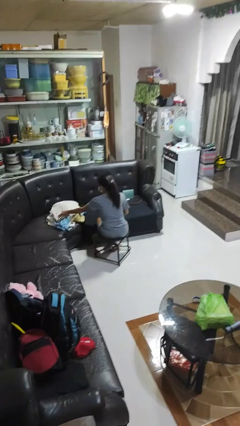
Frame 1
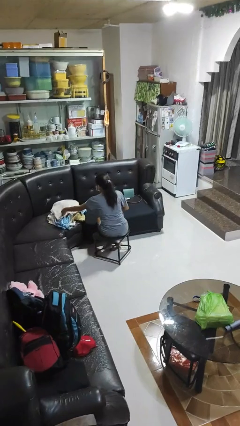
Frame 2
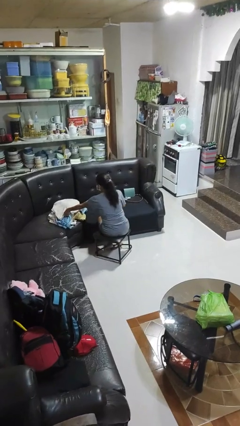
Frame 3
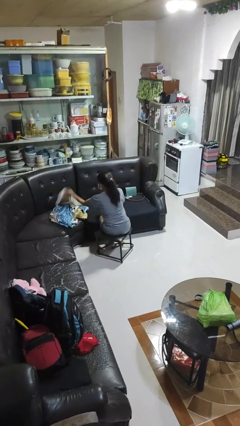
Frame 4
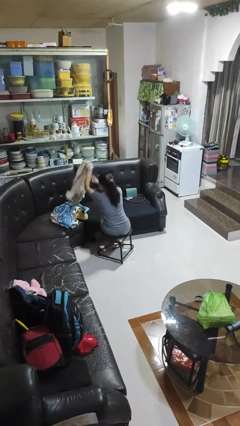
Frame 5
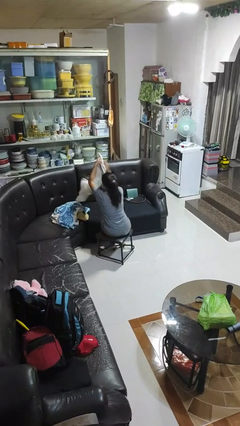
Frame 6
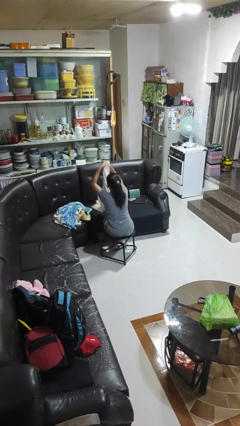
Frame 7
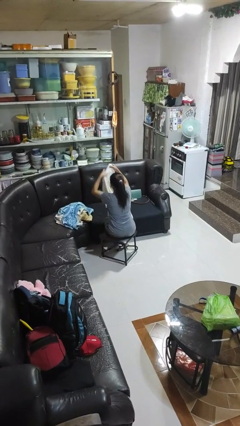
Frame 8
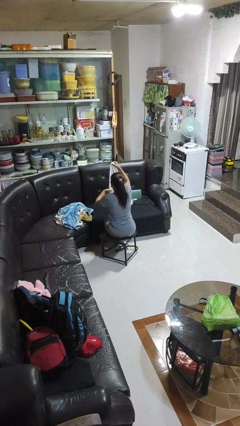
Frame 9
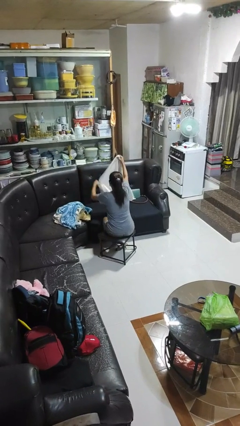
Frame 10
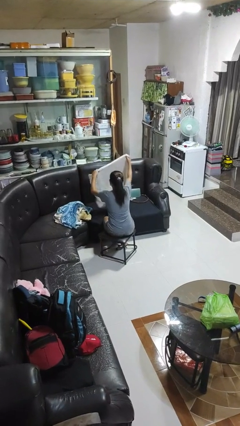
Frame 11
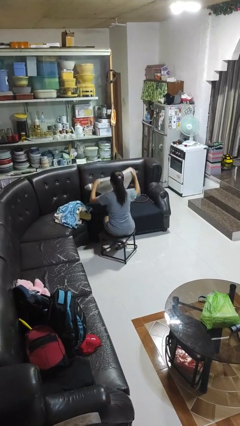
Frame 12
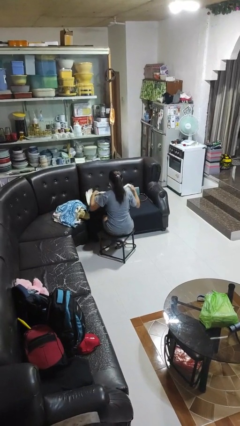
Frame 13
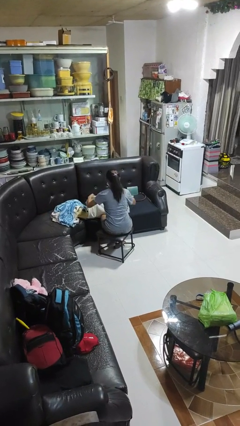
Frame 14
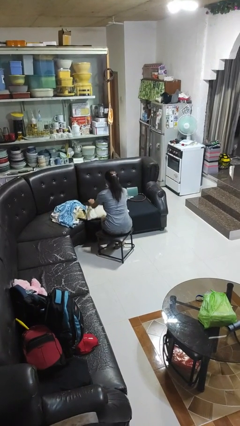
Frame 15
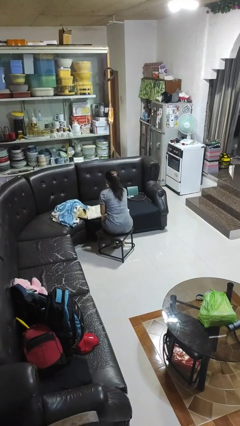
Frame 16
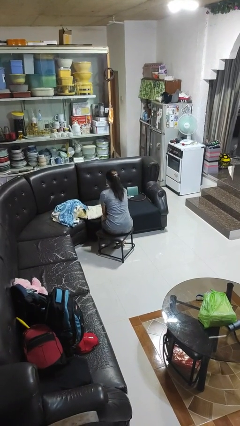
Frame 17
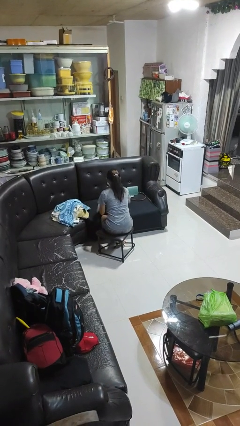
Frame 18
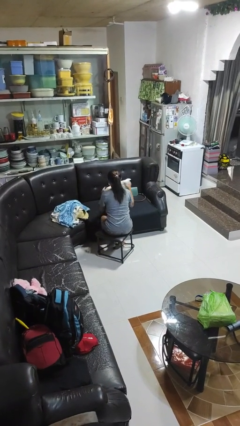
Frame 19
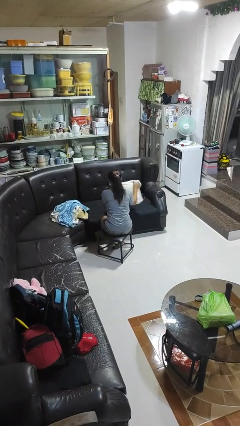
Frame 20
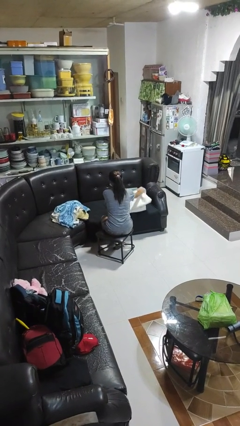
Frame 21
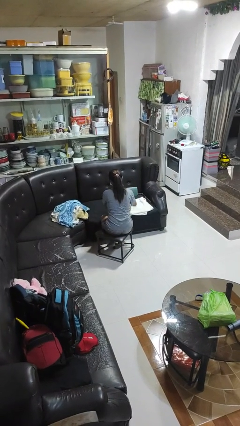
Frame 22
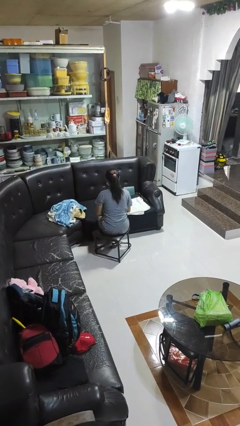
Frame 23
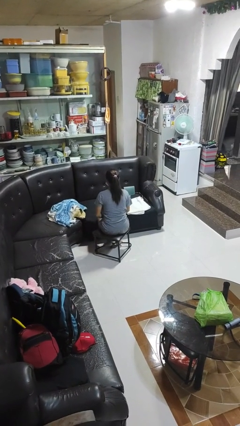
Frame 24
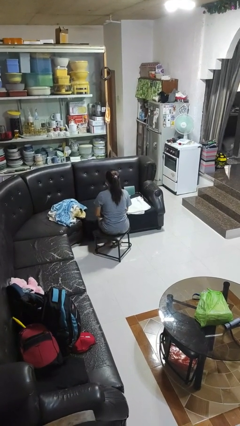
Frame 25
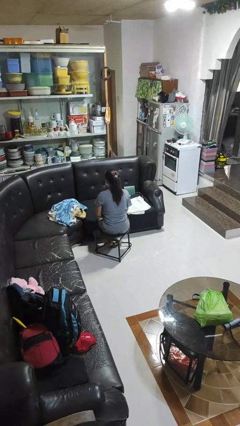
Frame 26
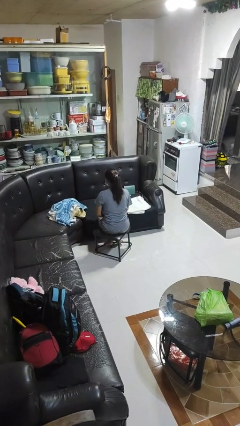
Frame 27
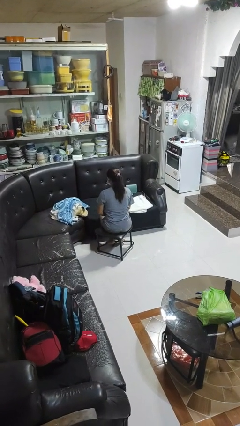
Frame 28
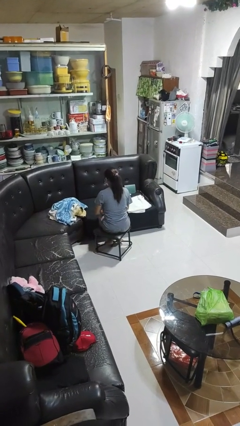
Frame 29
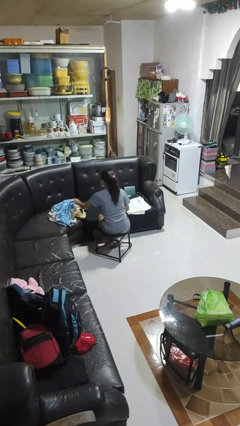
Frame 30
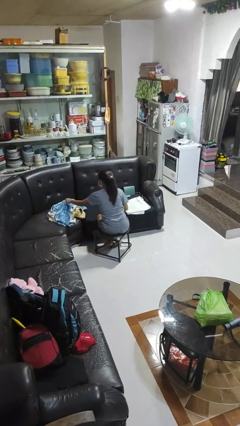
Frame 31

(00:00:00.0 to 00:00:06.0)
person folds towel

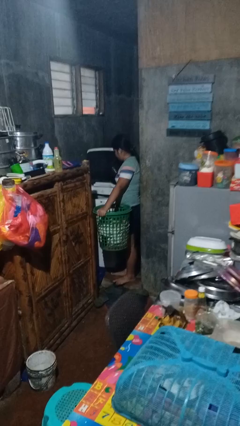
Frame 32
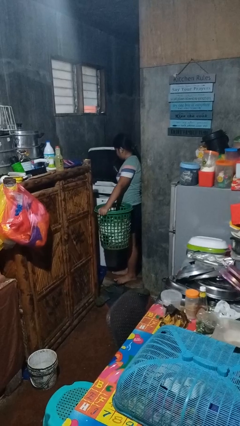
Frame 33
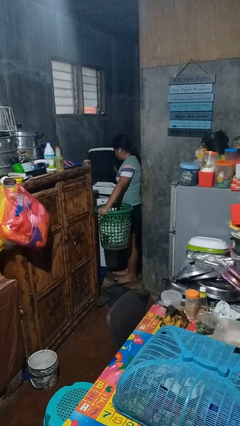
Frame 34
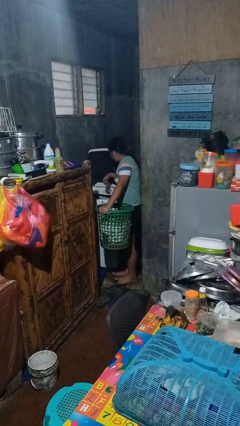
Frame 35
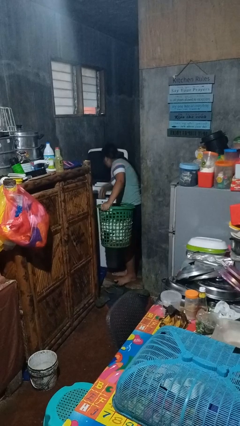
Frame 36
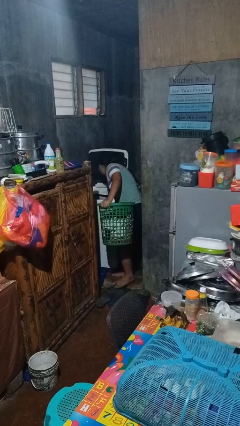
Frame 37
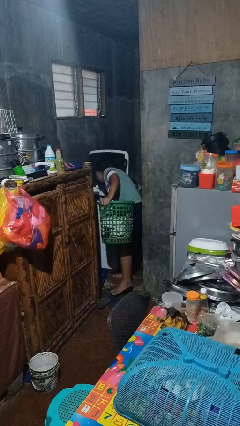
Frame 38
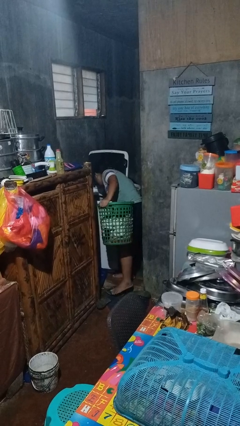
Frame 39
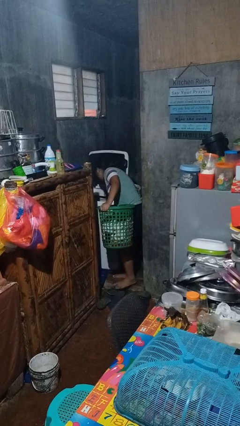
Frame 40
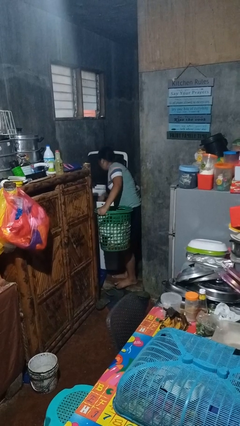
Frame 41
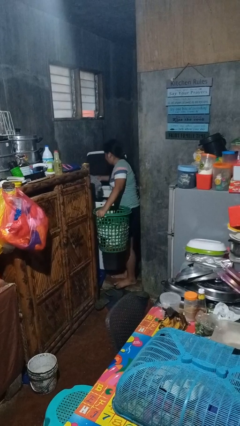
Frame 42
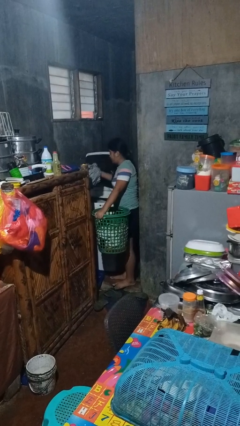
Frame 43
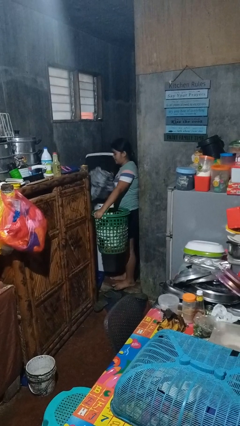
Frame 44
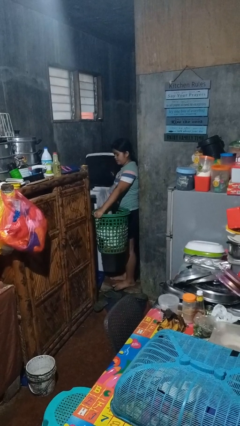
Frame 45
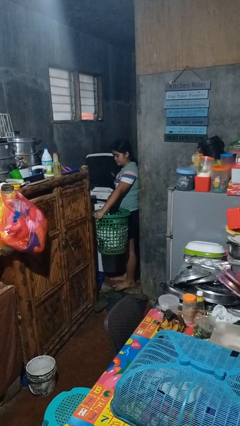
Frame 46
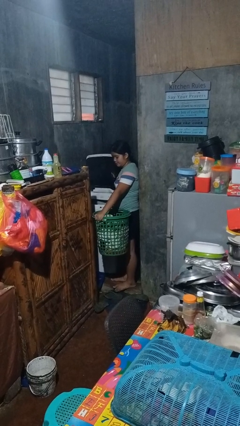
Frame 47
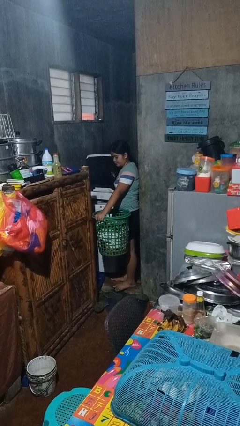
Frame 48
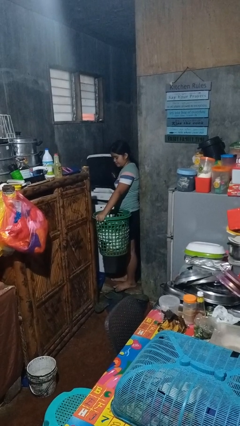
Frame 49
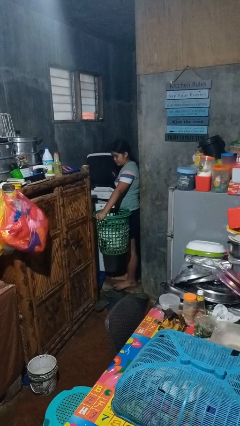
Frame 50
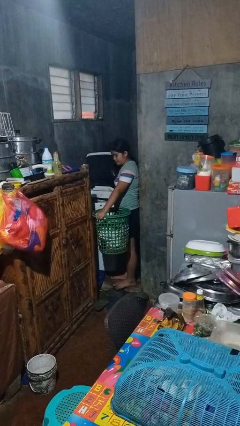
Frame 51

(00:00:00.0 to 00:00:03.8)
person unloads clotheswasher

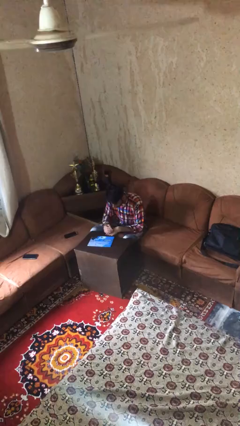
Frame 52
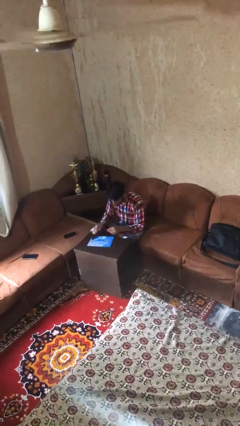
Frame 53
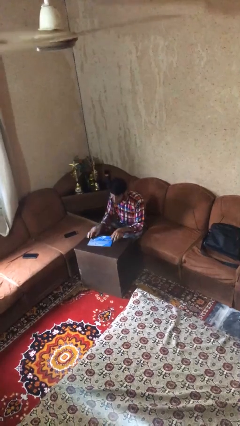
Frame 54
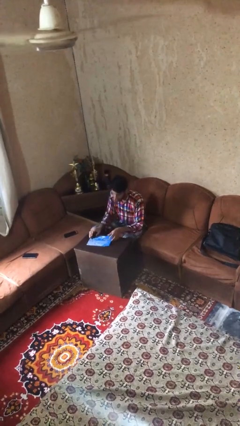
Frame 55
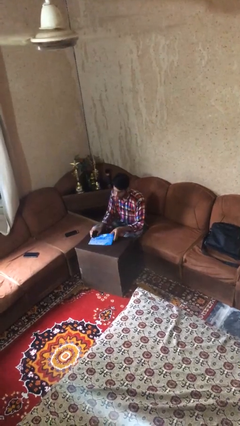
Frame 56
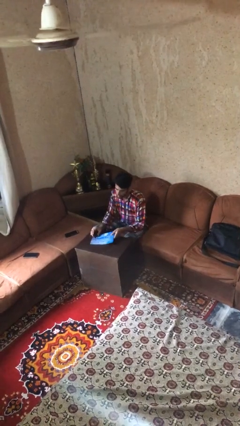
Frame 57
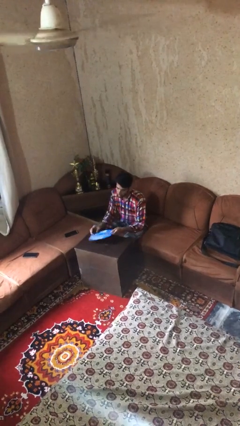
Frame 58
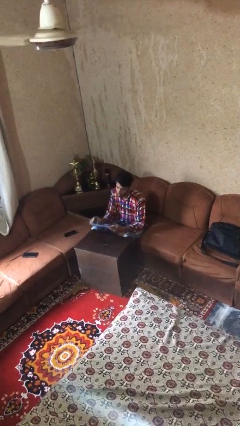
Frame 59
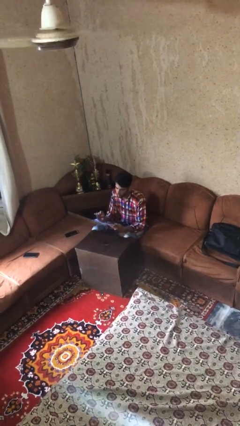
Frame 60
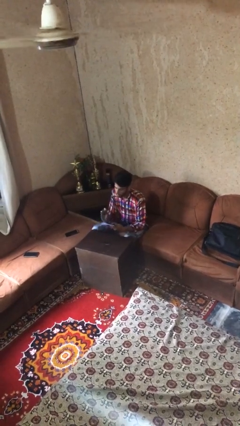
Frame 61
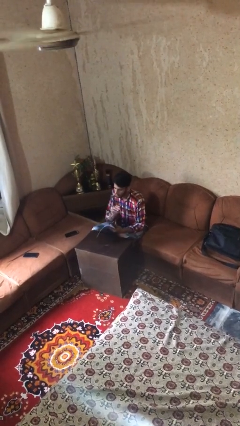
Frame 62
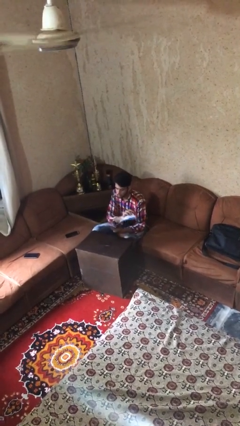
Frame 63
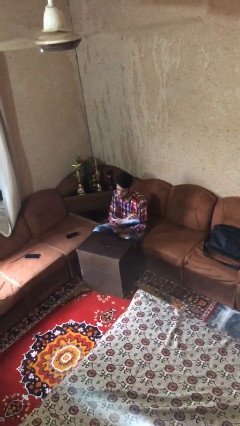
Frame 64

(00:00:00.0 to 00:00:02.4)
person picks up object from table

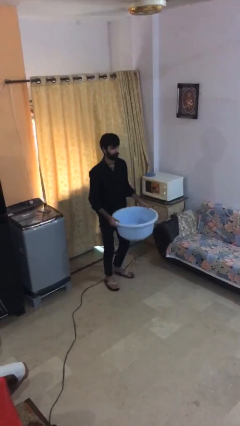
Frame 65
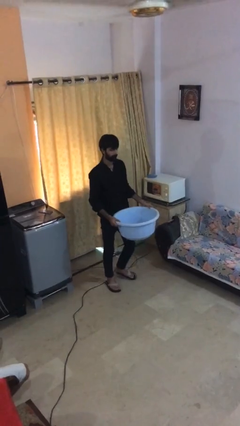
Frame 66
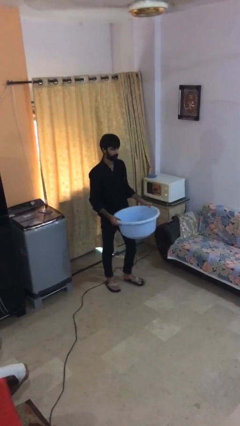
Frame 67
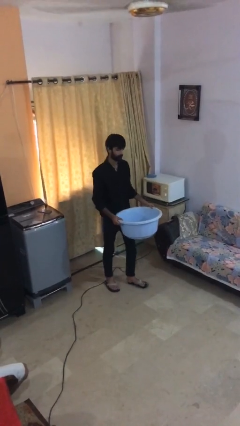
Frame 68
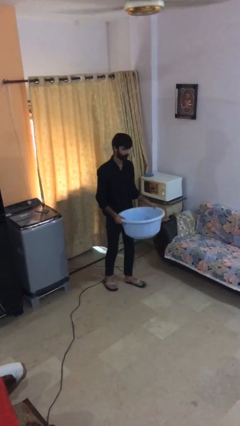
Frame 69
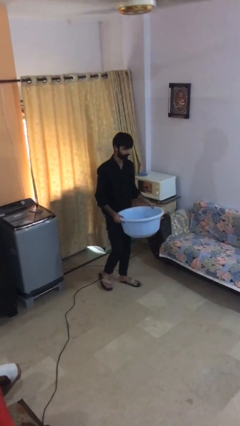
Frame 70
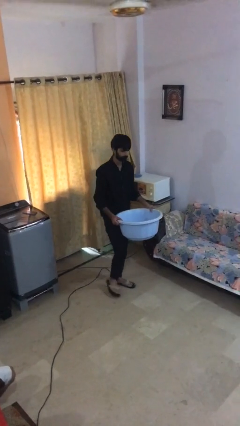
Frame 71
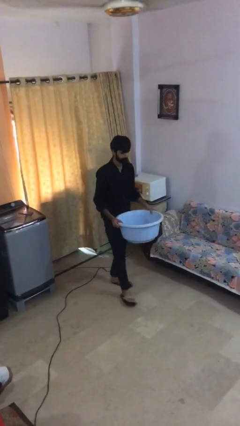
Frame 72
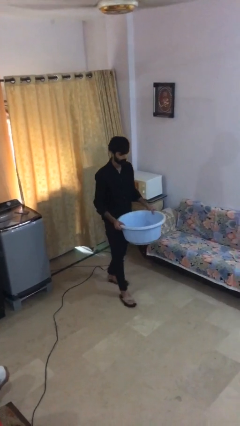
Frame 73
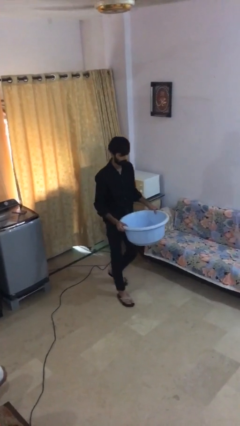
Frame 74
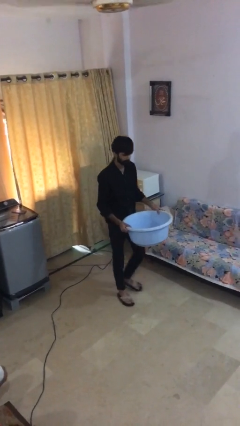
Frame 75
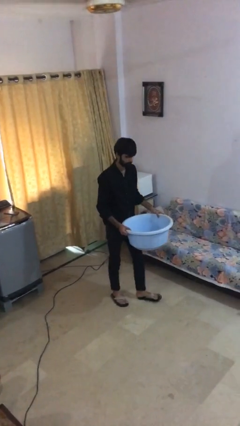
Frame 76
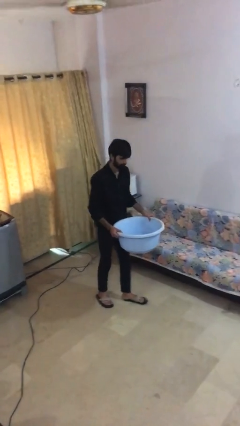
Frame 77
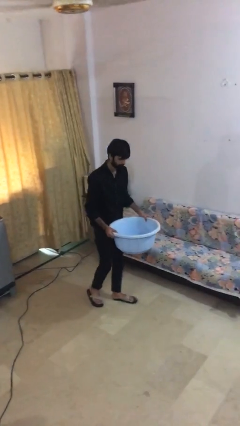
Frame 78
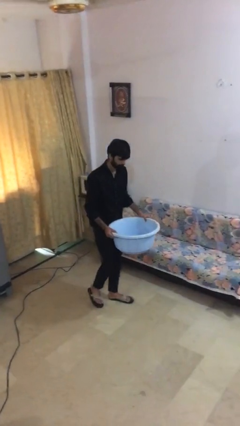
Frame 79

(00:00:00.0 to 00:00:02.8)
person carries heavy object

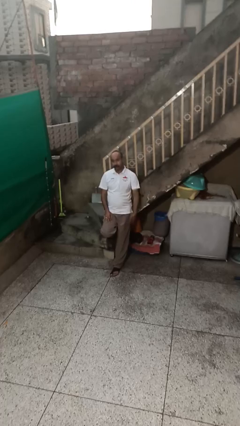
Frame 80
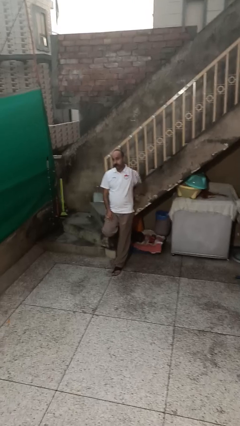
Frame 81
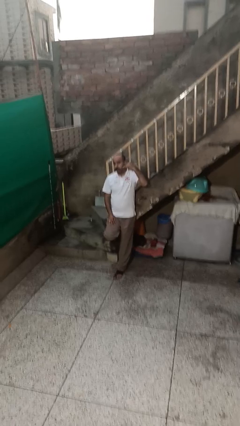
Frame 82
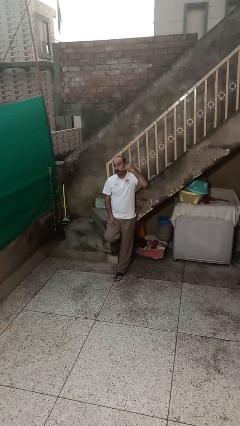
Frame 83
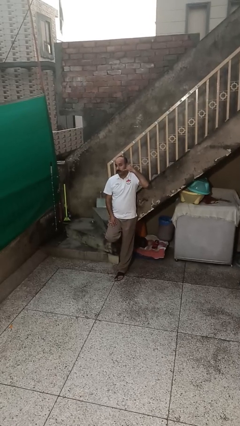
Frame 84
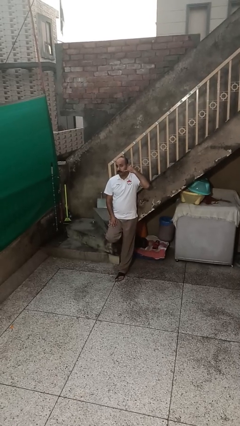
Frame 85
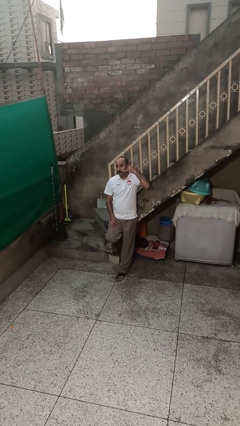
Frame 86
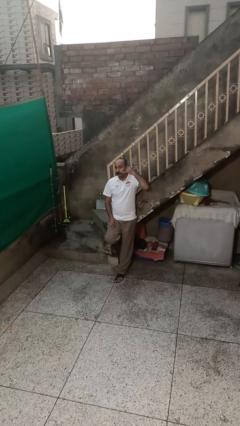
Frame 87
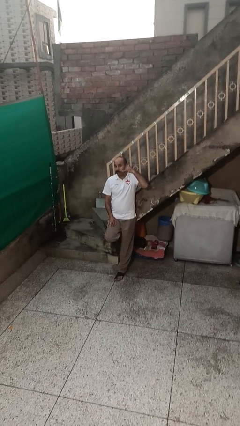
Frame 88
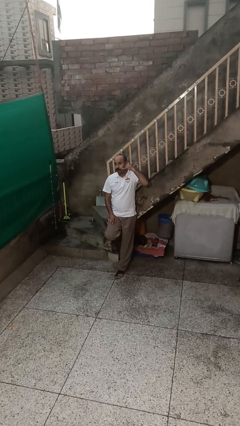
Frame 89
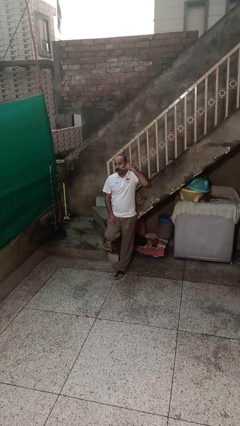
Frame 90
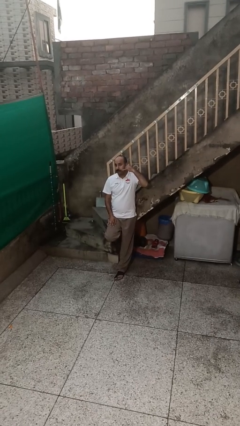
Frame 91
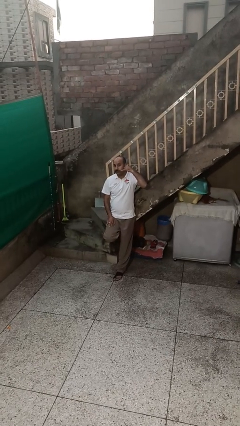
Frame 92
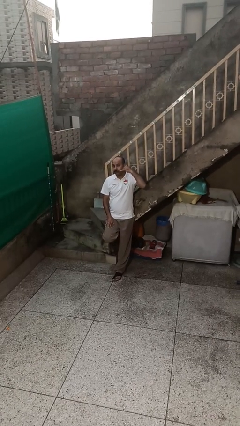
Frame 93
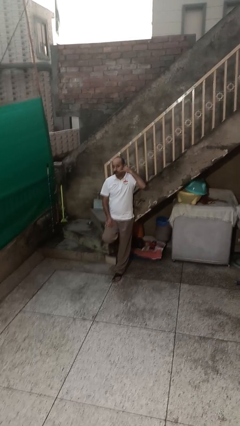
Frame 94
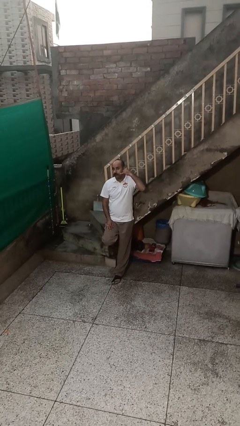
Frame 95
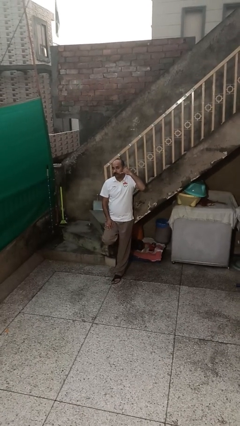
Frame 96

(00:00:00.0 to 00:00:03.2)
person gestures call me
